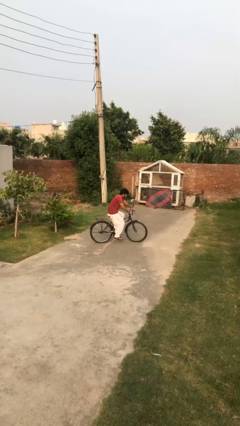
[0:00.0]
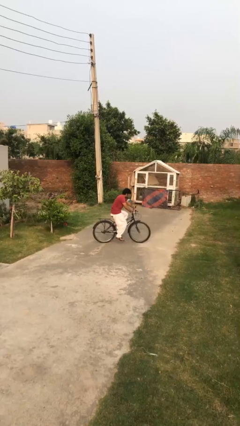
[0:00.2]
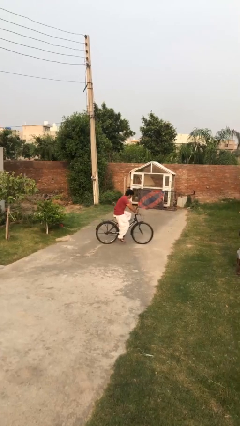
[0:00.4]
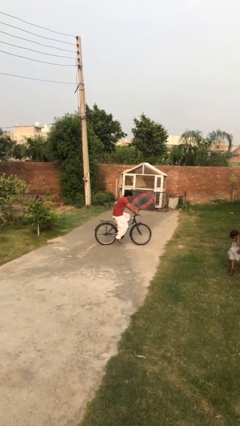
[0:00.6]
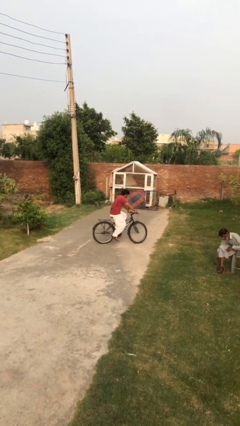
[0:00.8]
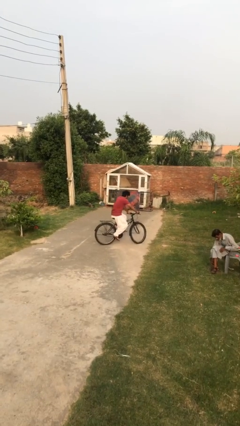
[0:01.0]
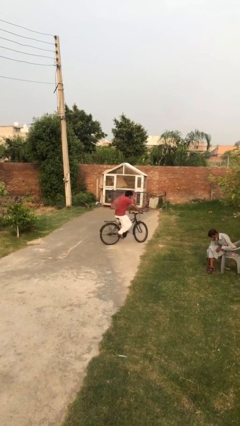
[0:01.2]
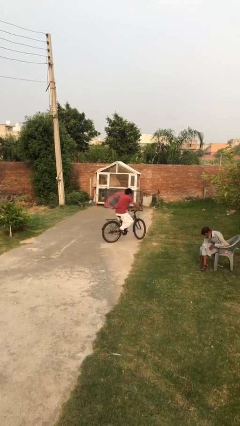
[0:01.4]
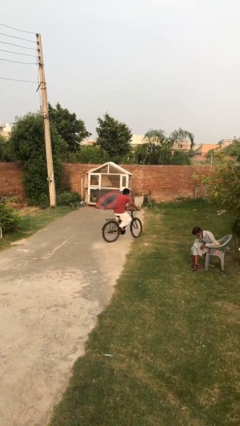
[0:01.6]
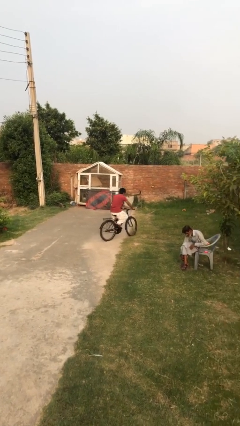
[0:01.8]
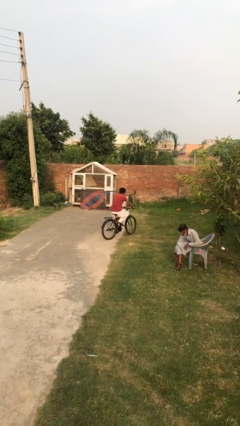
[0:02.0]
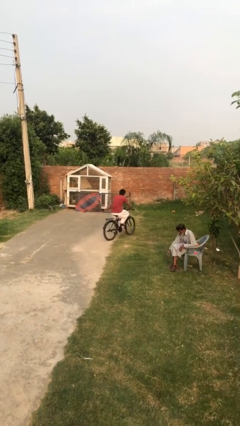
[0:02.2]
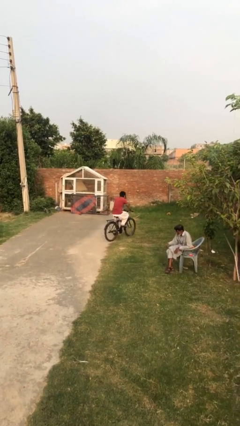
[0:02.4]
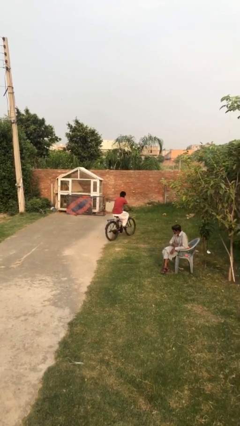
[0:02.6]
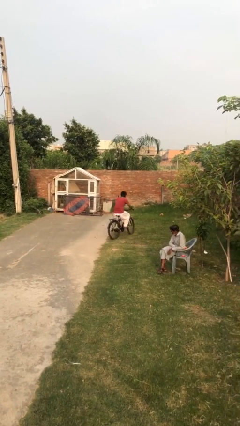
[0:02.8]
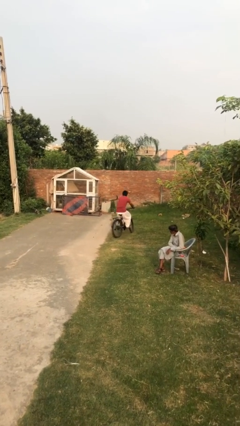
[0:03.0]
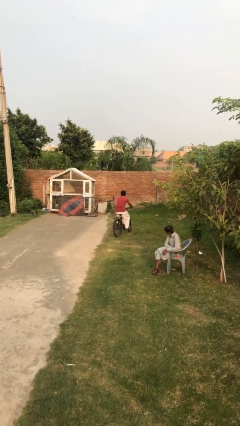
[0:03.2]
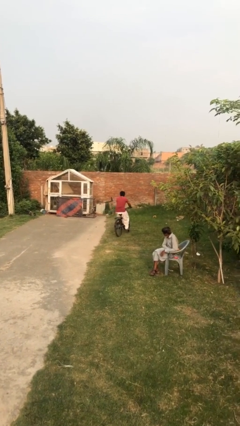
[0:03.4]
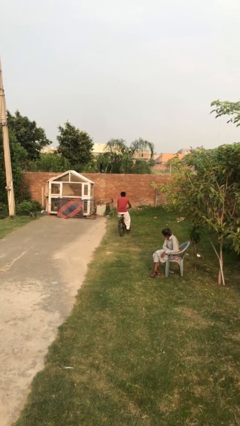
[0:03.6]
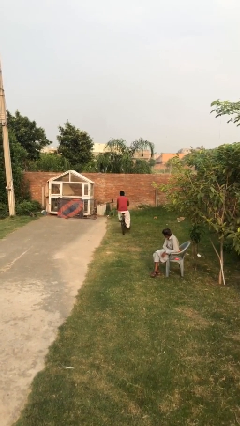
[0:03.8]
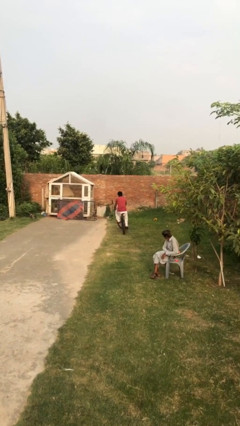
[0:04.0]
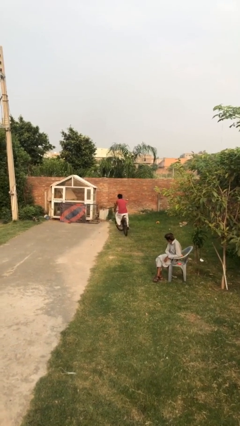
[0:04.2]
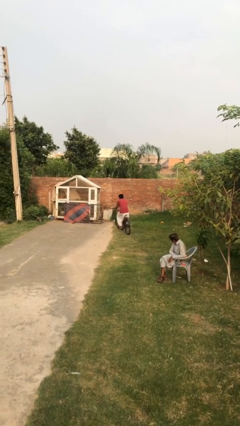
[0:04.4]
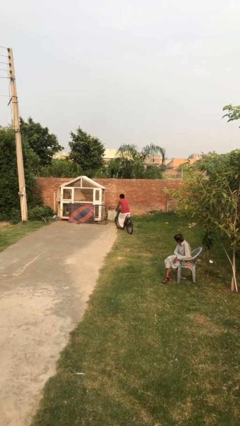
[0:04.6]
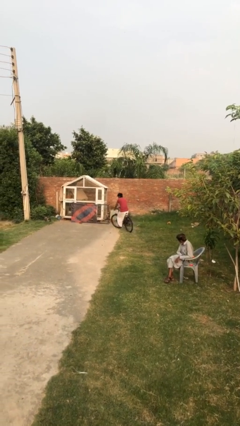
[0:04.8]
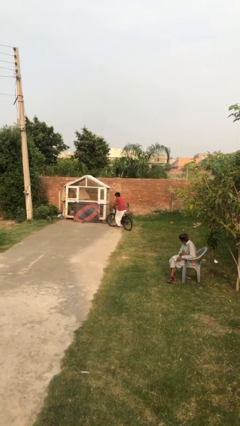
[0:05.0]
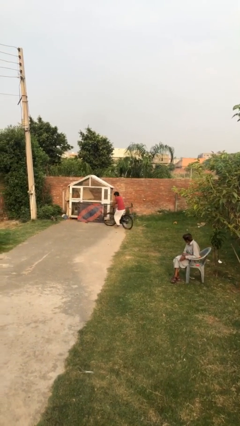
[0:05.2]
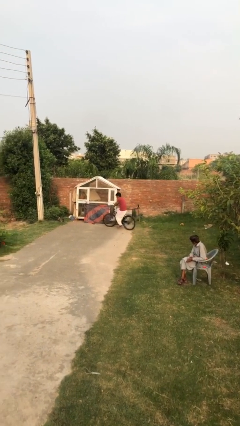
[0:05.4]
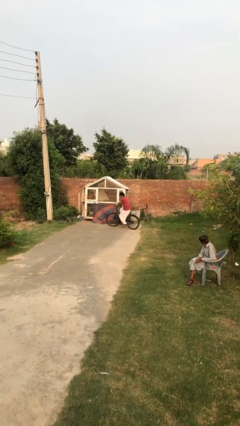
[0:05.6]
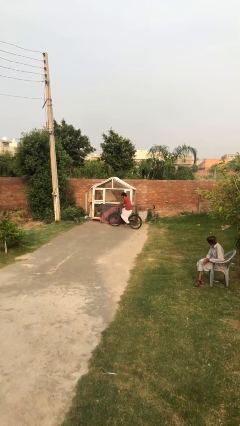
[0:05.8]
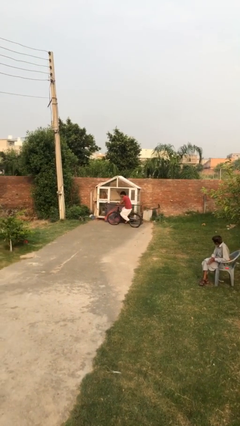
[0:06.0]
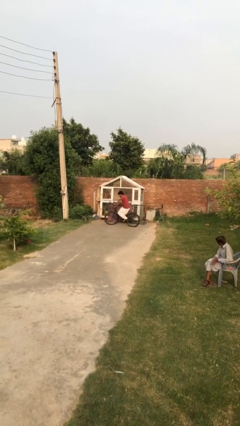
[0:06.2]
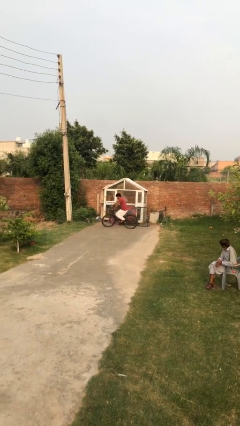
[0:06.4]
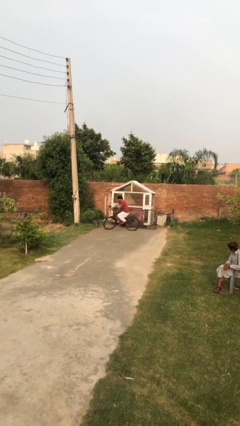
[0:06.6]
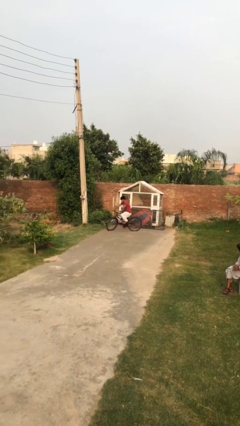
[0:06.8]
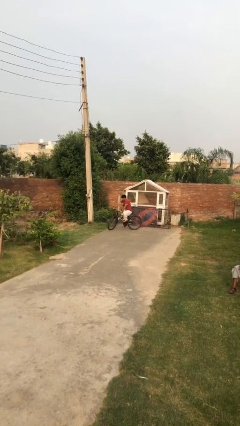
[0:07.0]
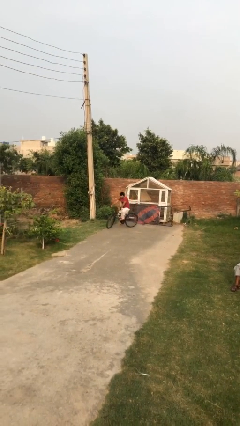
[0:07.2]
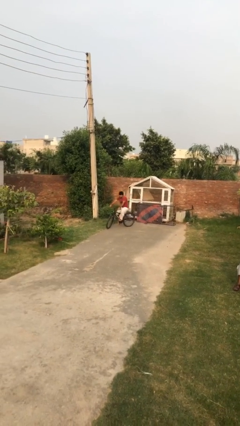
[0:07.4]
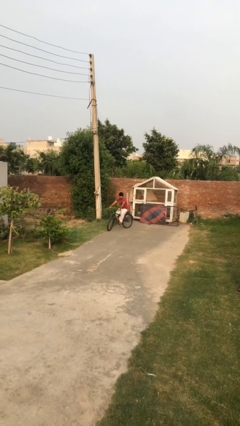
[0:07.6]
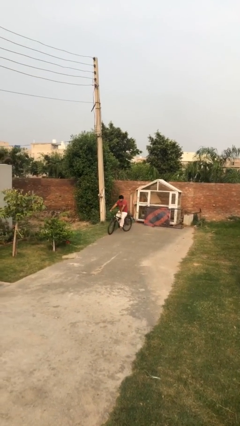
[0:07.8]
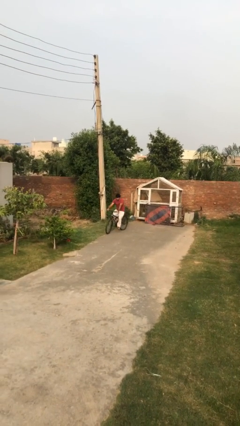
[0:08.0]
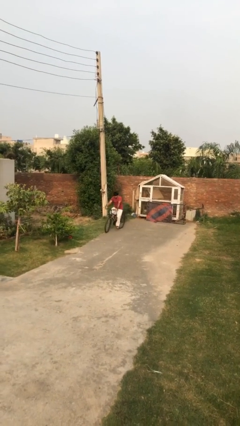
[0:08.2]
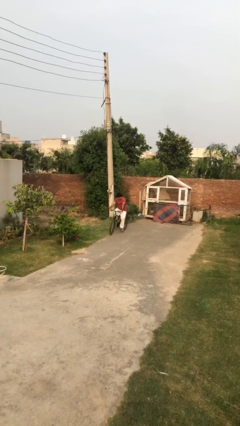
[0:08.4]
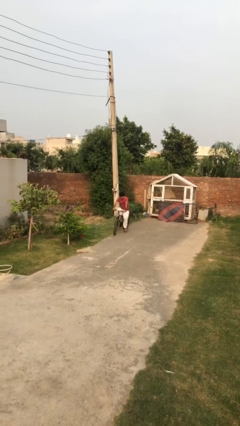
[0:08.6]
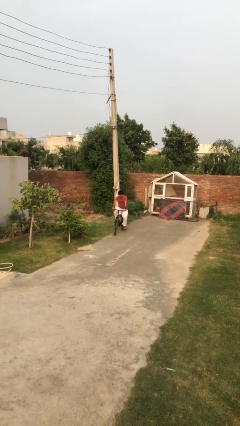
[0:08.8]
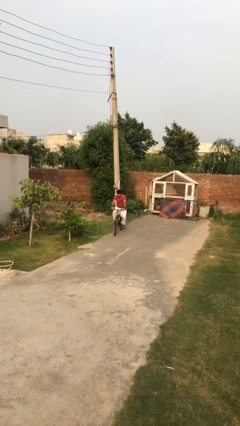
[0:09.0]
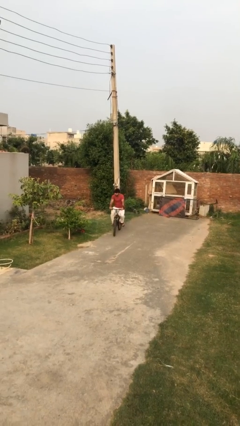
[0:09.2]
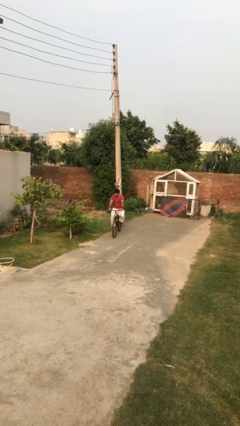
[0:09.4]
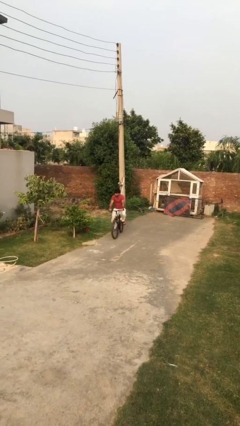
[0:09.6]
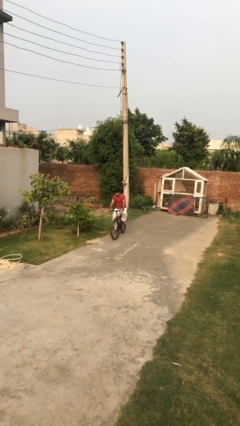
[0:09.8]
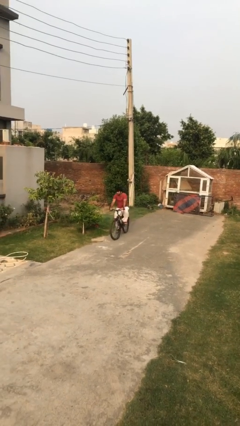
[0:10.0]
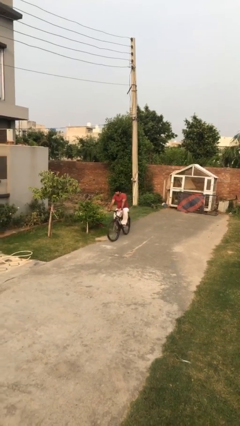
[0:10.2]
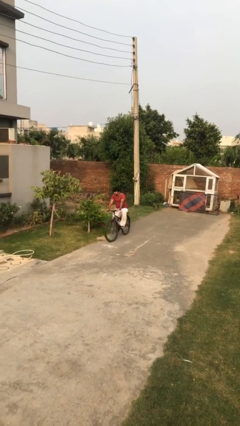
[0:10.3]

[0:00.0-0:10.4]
person rides bicycle

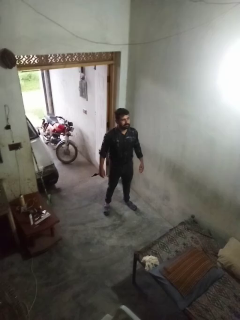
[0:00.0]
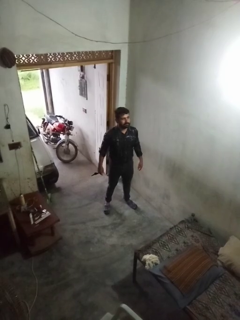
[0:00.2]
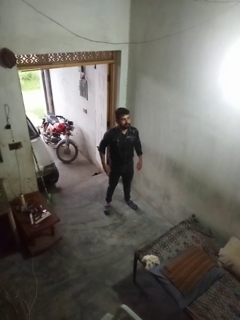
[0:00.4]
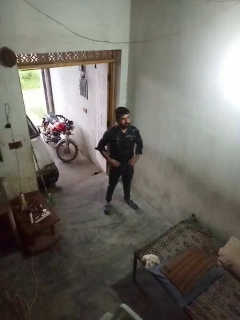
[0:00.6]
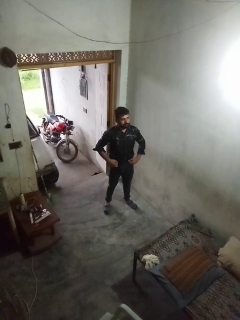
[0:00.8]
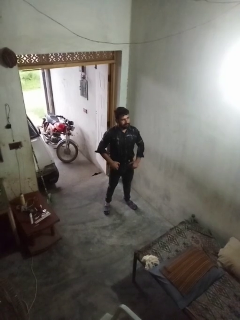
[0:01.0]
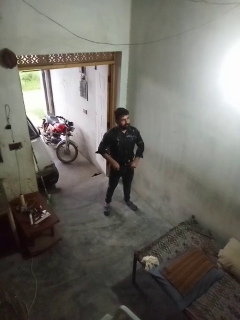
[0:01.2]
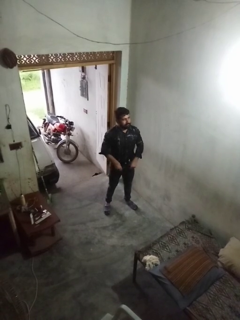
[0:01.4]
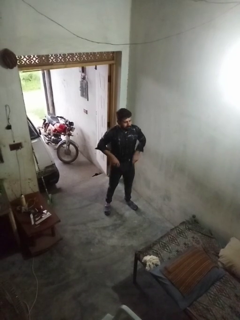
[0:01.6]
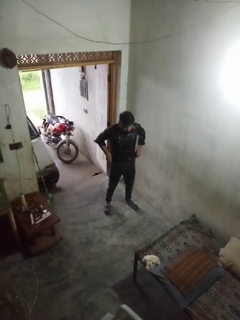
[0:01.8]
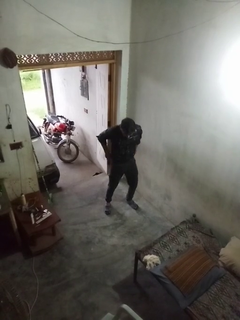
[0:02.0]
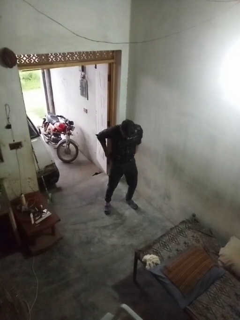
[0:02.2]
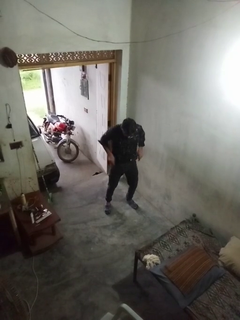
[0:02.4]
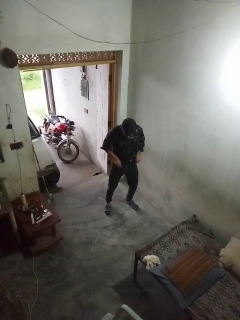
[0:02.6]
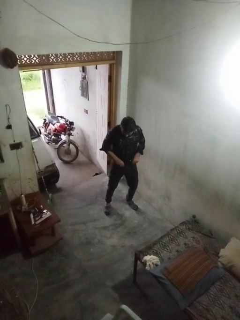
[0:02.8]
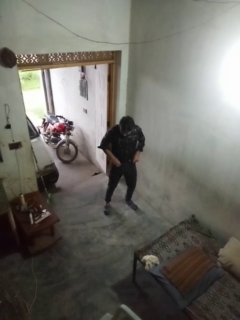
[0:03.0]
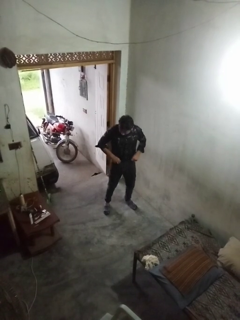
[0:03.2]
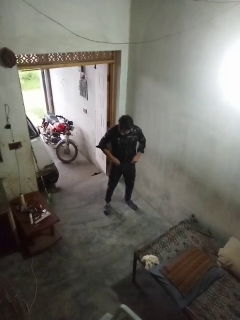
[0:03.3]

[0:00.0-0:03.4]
person hikes up pants

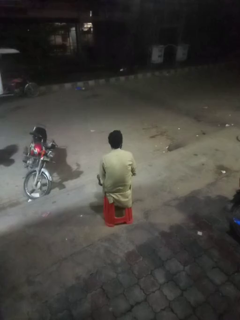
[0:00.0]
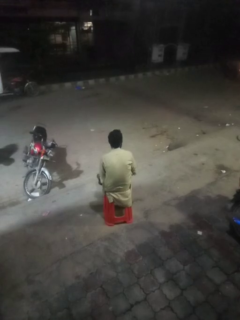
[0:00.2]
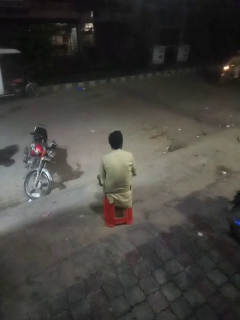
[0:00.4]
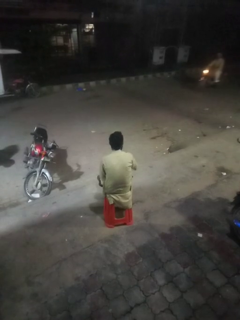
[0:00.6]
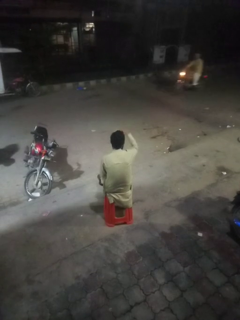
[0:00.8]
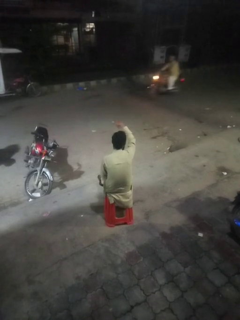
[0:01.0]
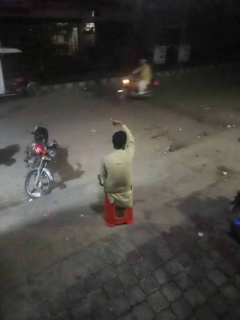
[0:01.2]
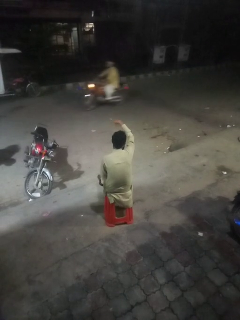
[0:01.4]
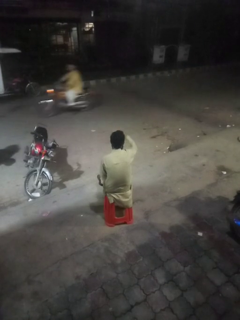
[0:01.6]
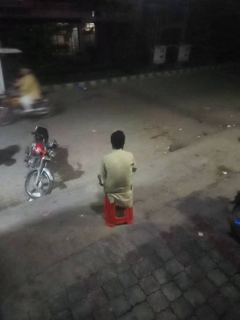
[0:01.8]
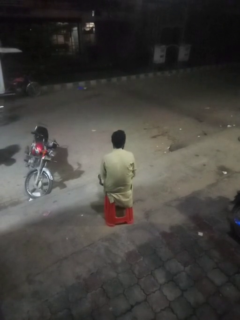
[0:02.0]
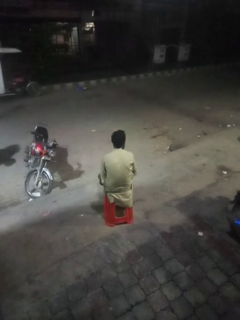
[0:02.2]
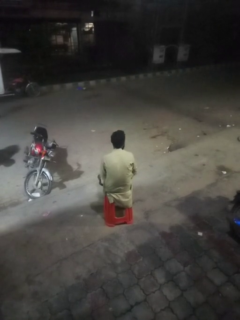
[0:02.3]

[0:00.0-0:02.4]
person gestures hang loose

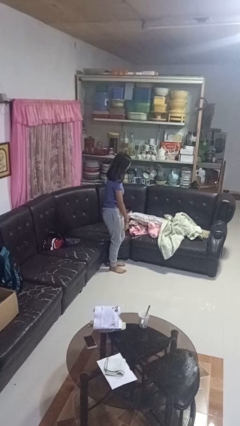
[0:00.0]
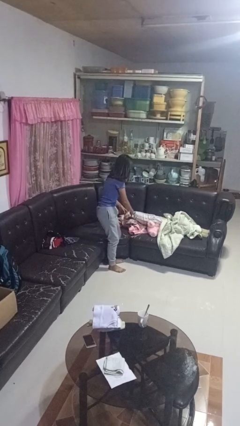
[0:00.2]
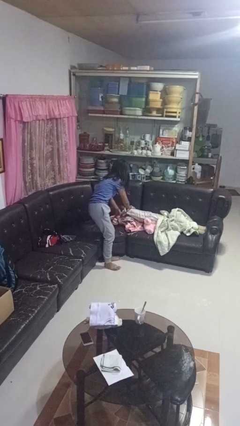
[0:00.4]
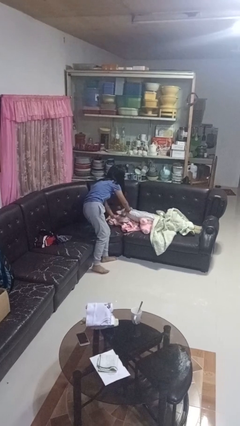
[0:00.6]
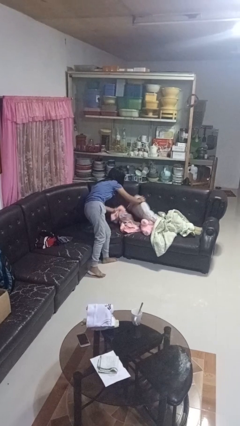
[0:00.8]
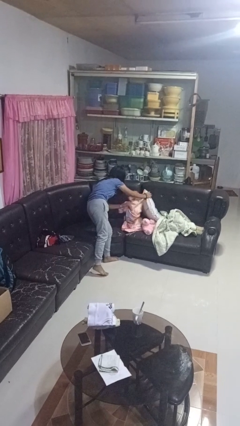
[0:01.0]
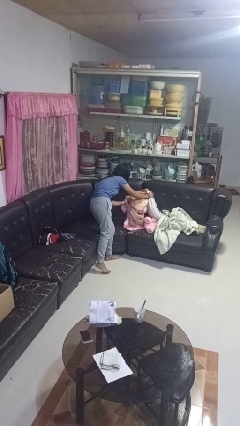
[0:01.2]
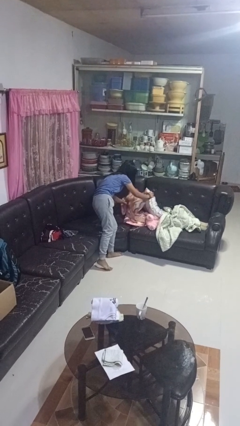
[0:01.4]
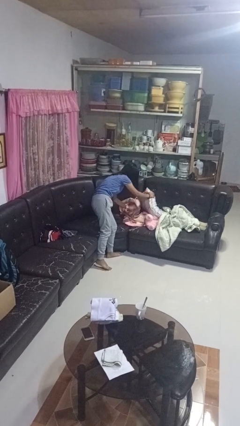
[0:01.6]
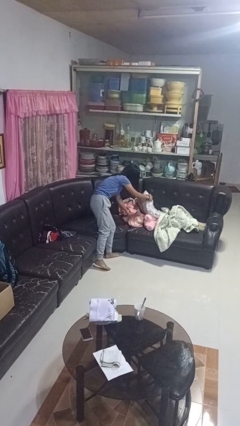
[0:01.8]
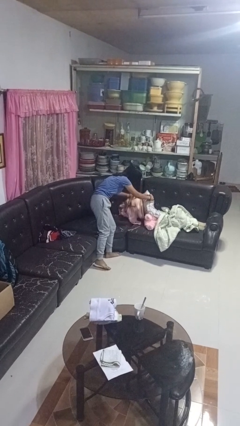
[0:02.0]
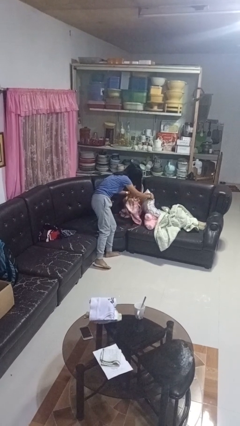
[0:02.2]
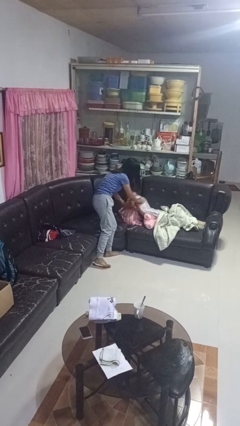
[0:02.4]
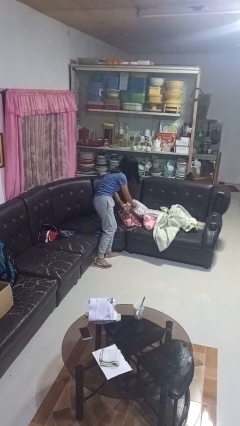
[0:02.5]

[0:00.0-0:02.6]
person searches in couch

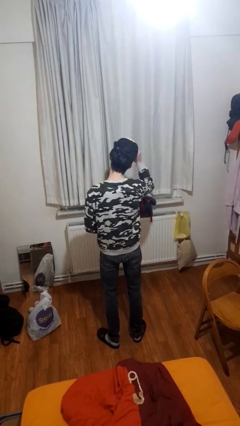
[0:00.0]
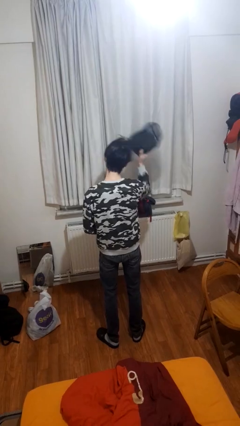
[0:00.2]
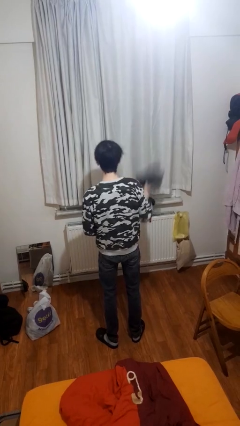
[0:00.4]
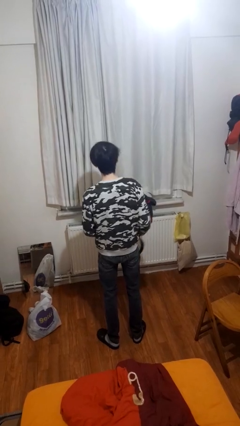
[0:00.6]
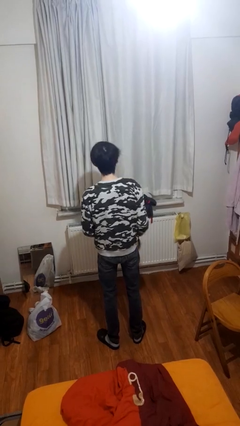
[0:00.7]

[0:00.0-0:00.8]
person takes off hat
